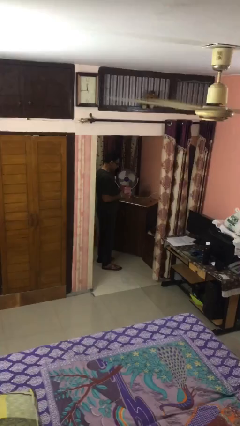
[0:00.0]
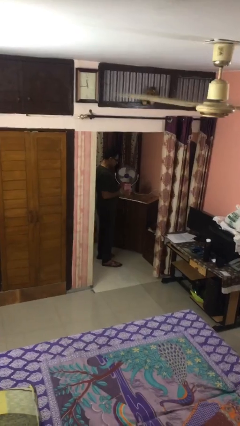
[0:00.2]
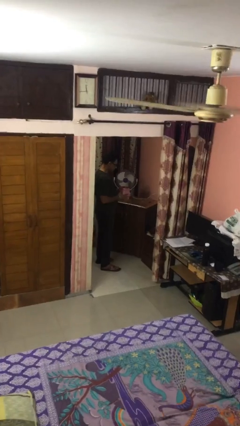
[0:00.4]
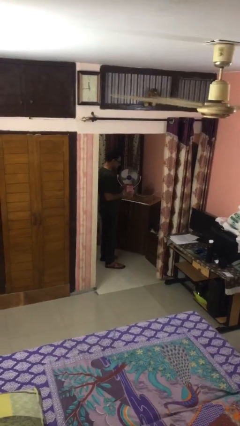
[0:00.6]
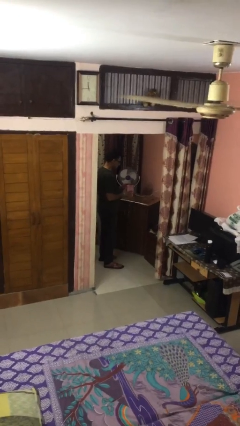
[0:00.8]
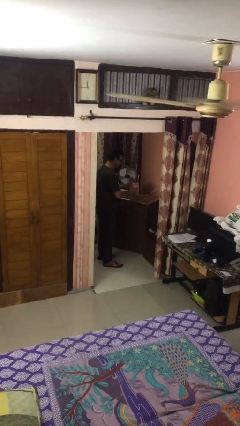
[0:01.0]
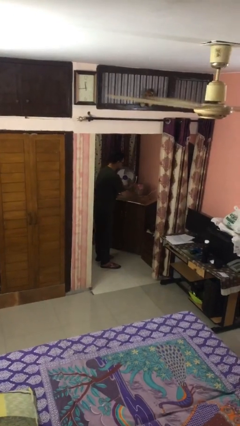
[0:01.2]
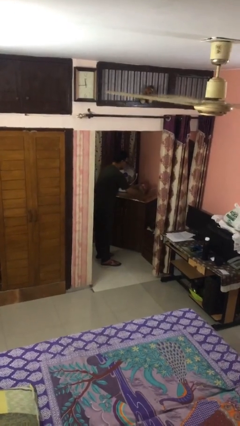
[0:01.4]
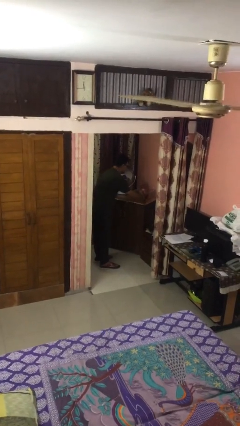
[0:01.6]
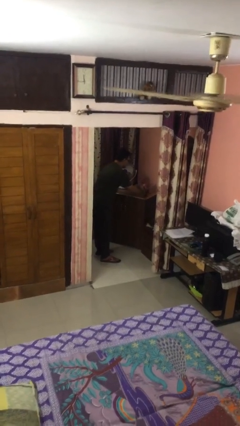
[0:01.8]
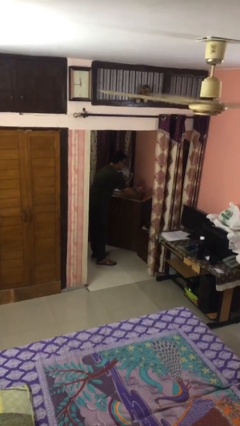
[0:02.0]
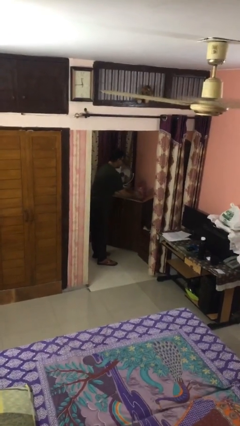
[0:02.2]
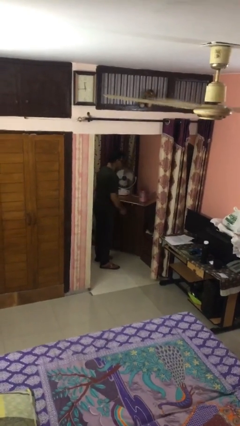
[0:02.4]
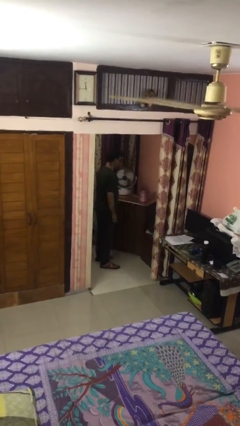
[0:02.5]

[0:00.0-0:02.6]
person puts down object on countertop

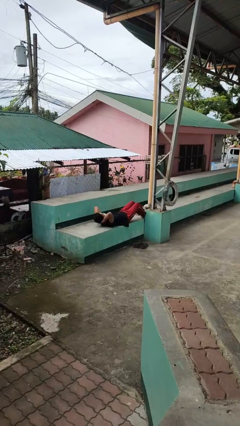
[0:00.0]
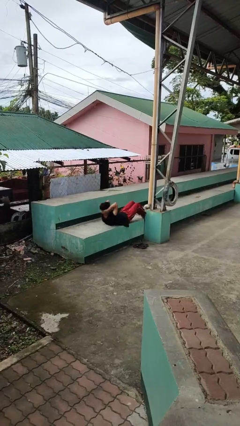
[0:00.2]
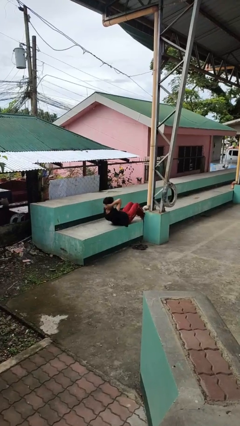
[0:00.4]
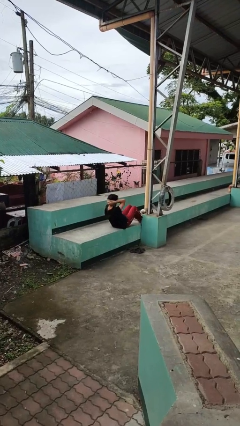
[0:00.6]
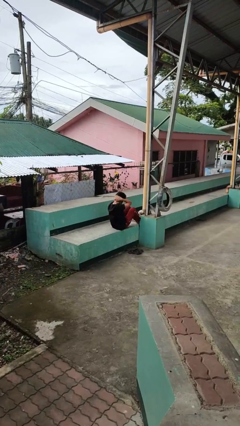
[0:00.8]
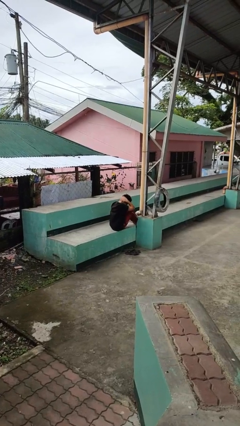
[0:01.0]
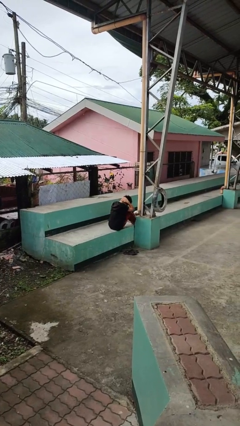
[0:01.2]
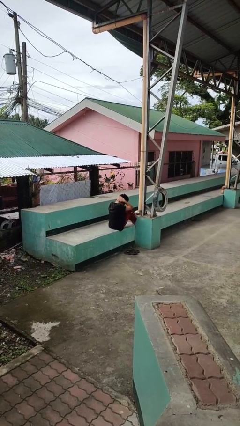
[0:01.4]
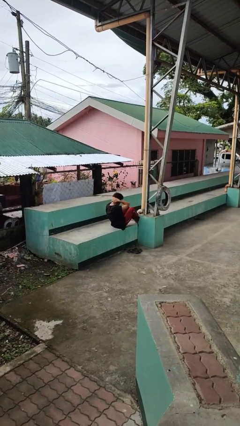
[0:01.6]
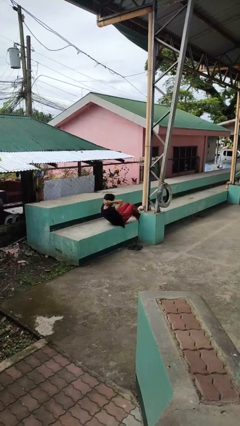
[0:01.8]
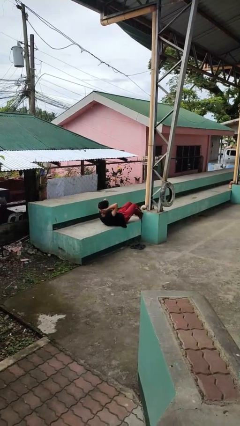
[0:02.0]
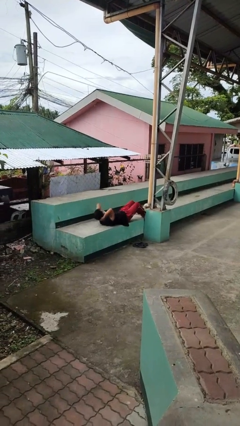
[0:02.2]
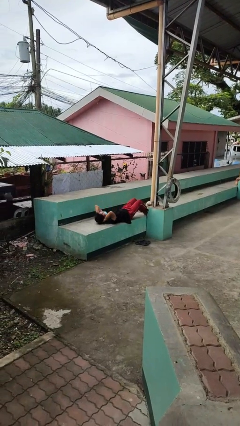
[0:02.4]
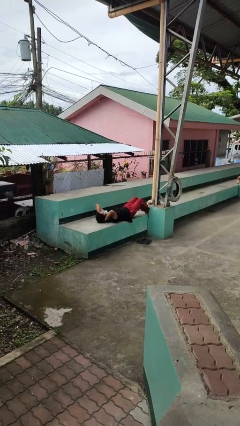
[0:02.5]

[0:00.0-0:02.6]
person exercises with situp

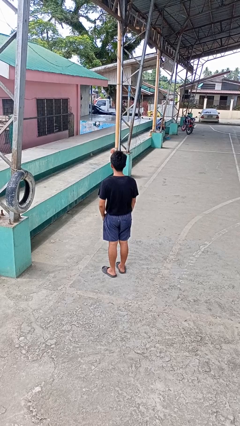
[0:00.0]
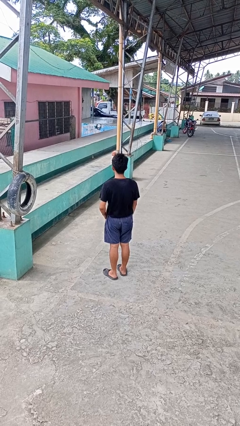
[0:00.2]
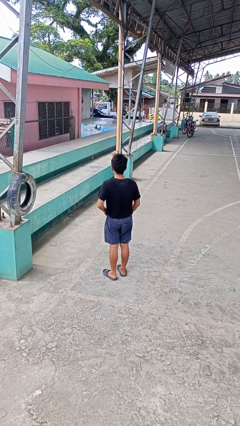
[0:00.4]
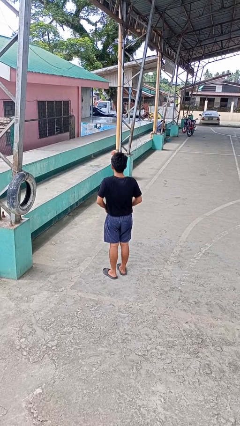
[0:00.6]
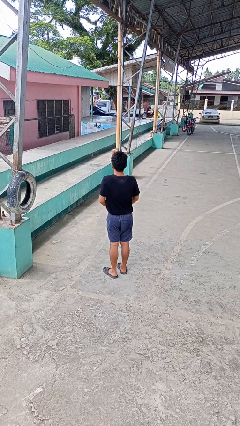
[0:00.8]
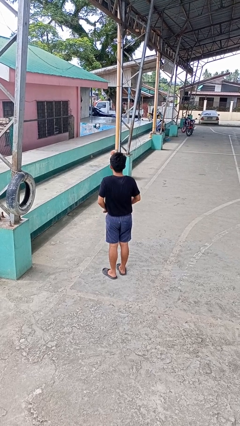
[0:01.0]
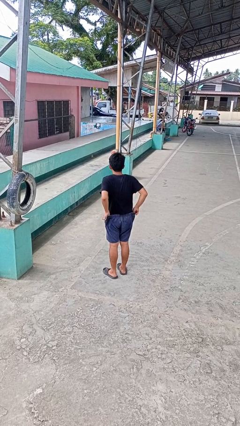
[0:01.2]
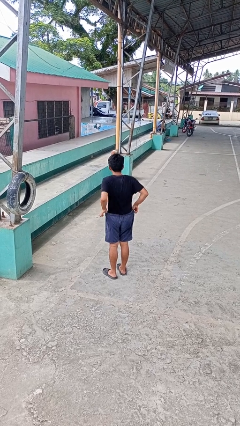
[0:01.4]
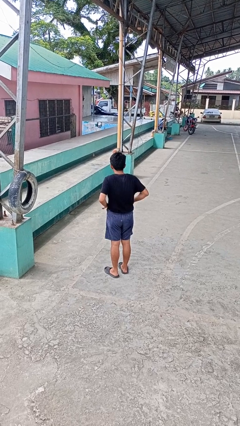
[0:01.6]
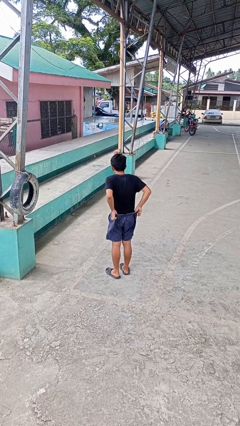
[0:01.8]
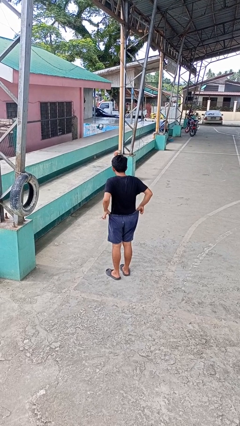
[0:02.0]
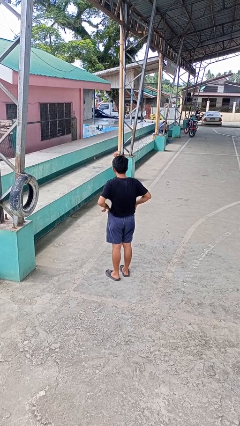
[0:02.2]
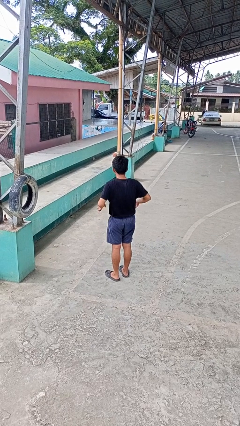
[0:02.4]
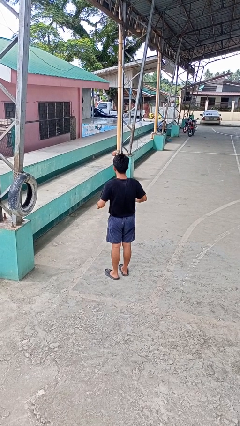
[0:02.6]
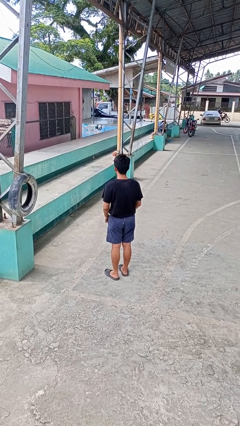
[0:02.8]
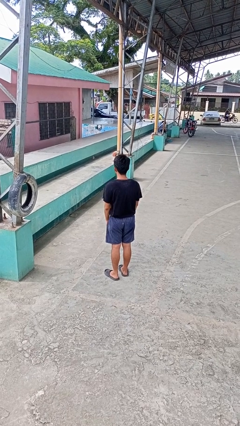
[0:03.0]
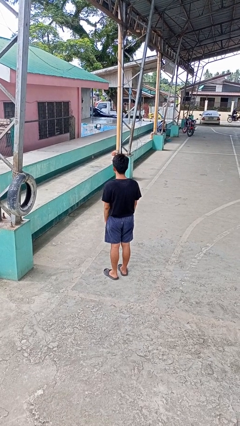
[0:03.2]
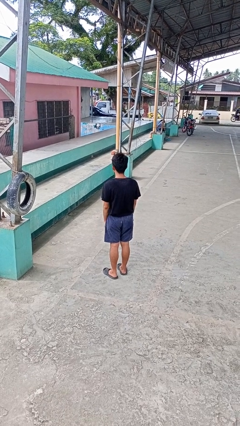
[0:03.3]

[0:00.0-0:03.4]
person hikes up pants

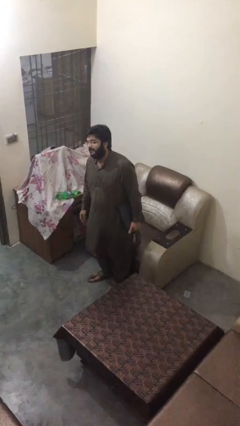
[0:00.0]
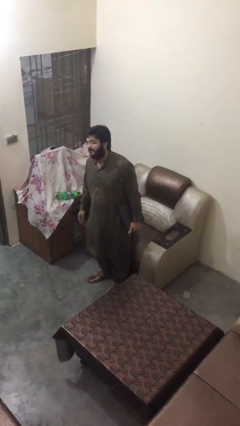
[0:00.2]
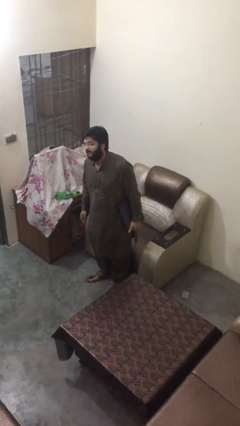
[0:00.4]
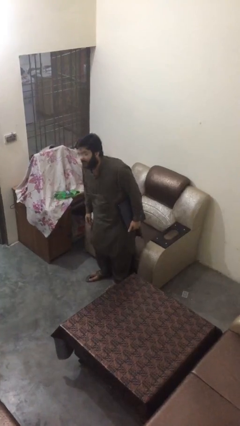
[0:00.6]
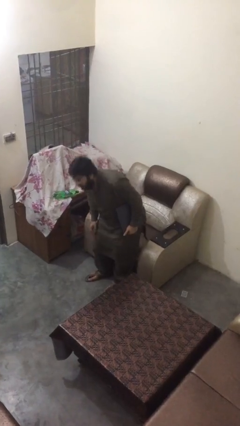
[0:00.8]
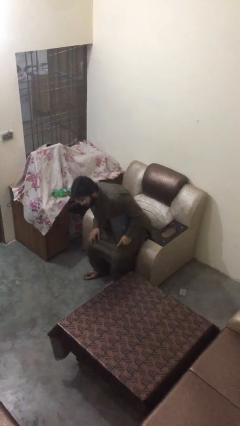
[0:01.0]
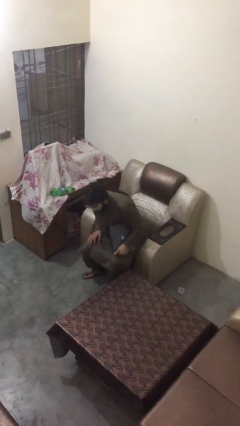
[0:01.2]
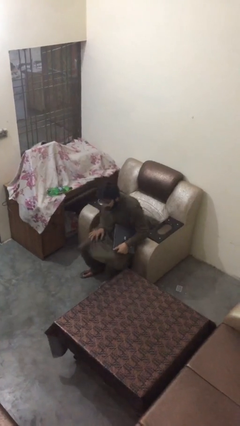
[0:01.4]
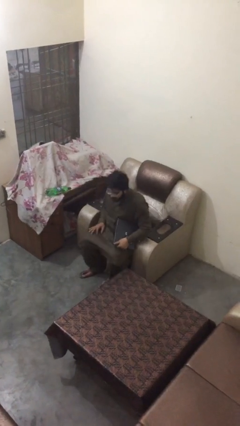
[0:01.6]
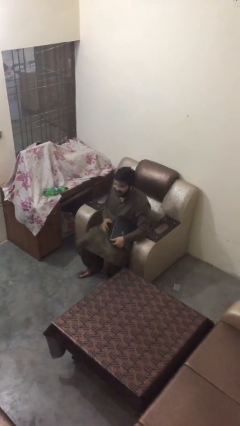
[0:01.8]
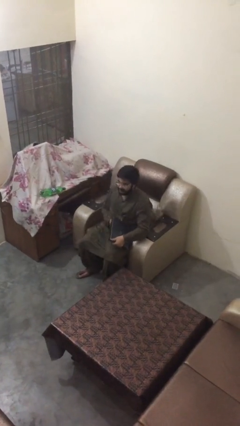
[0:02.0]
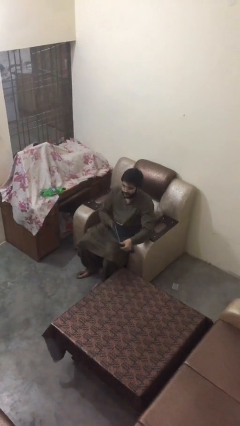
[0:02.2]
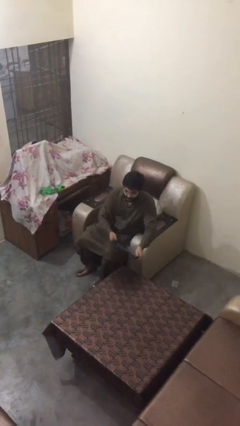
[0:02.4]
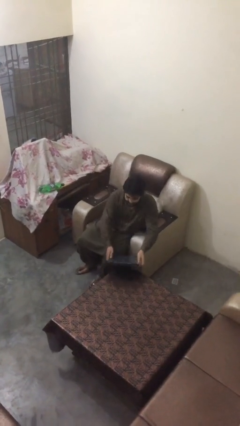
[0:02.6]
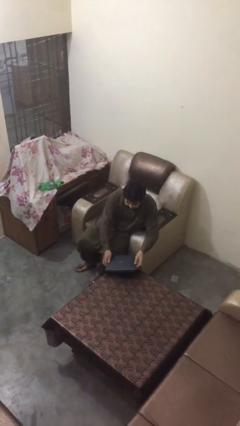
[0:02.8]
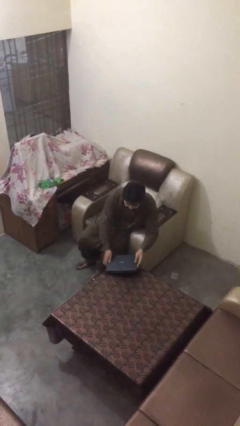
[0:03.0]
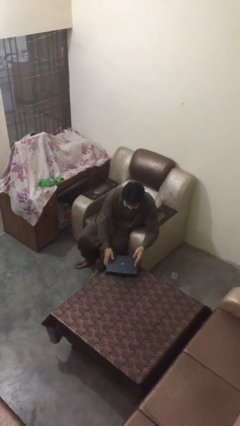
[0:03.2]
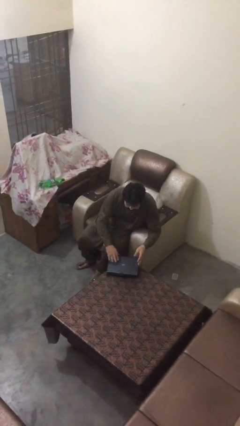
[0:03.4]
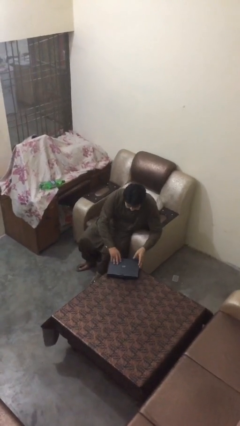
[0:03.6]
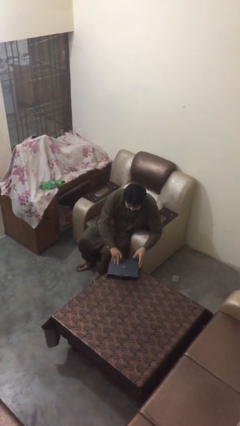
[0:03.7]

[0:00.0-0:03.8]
person sits down

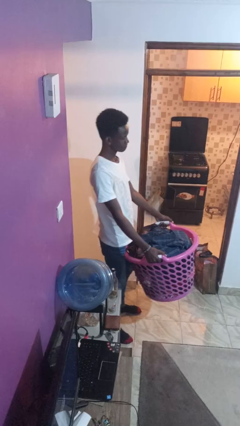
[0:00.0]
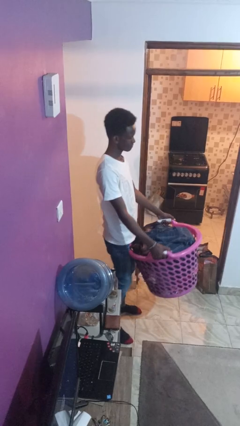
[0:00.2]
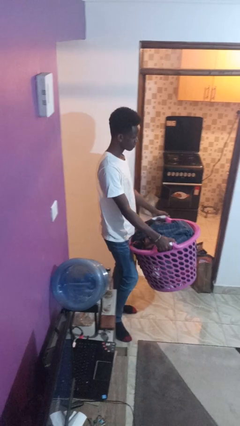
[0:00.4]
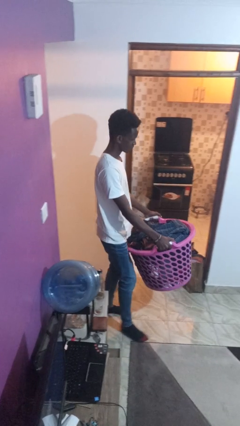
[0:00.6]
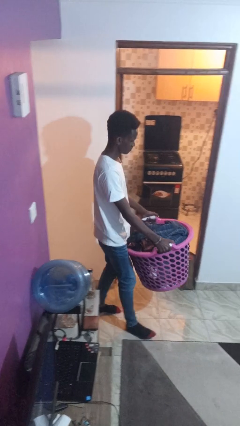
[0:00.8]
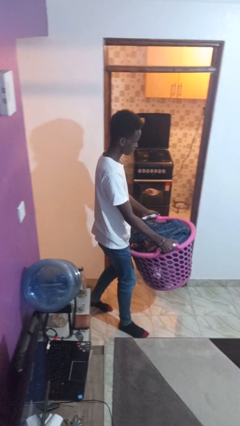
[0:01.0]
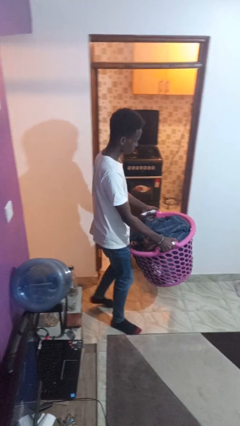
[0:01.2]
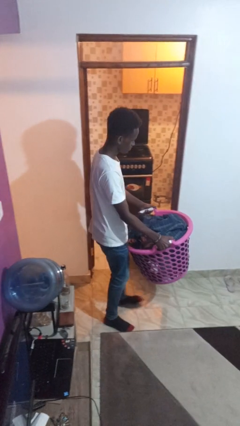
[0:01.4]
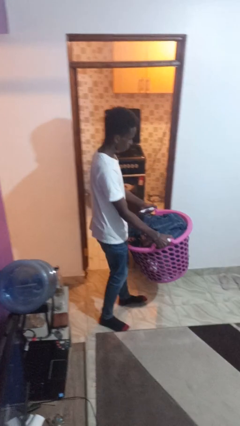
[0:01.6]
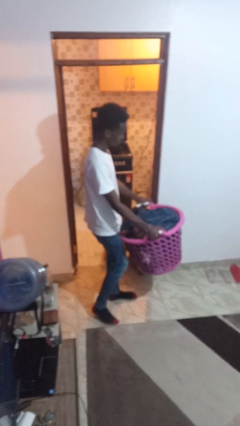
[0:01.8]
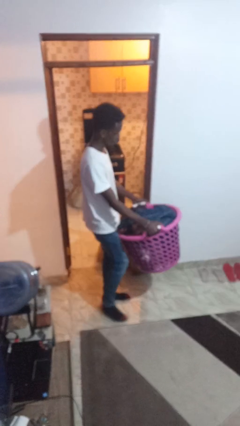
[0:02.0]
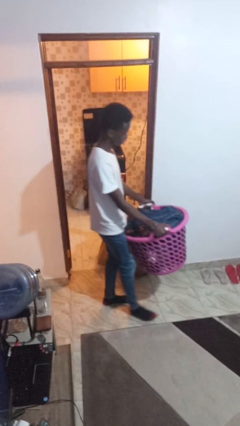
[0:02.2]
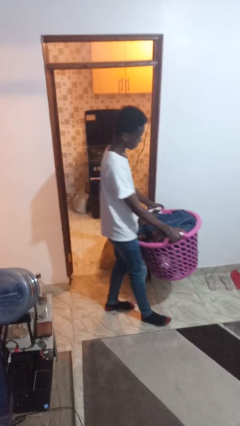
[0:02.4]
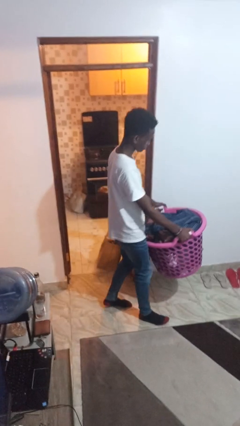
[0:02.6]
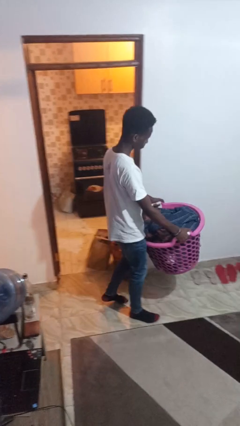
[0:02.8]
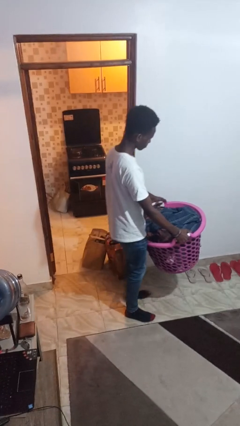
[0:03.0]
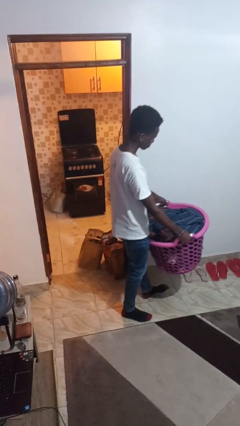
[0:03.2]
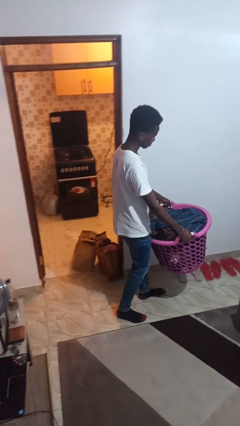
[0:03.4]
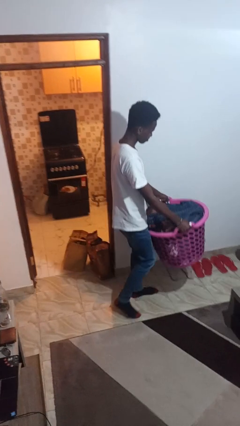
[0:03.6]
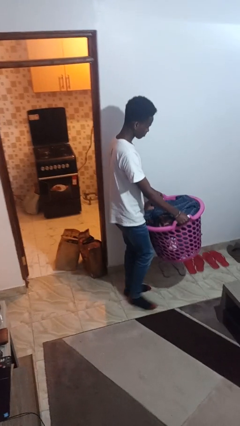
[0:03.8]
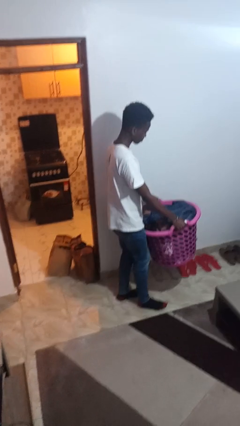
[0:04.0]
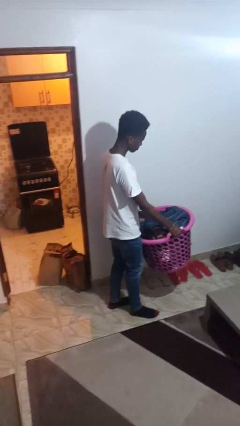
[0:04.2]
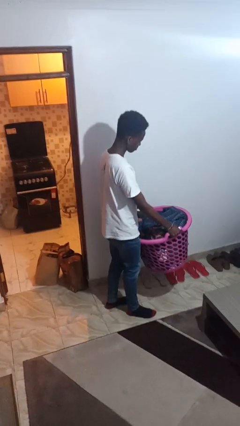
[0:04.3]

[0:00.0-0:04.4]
person carries laundry basket

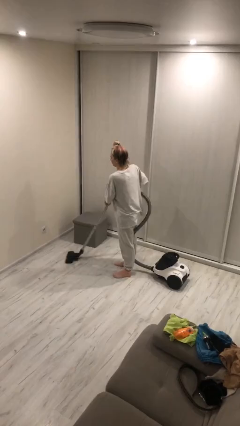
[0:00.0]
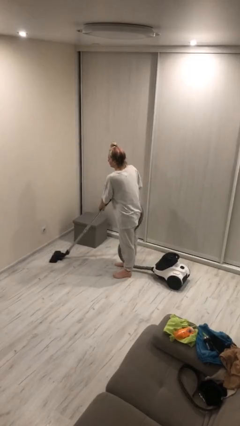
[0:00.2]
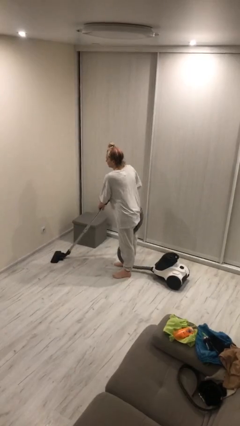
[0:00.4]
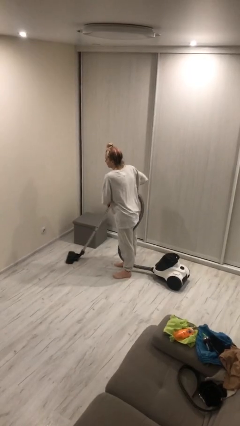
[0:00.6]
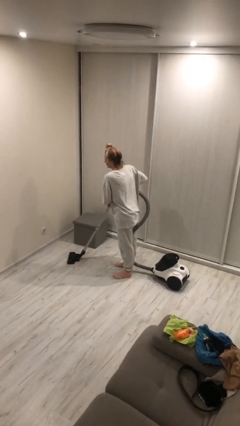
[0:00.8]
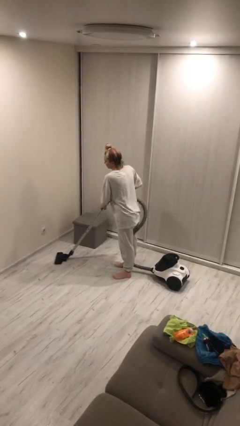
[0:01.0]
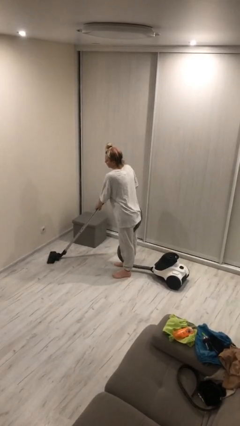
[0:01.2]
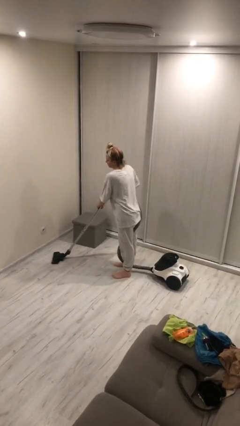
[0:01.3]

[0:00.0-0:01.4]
person vacuums carpet
